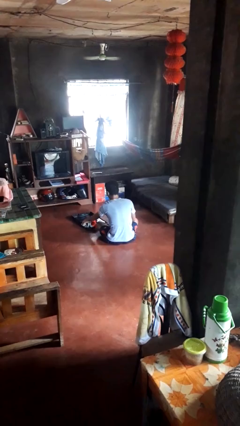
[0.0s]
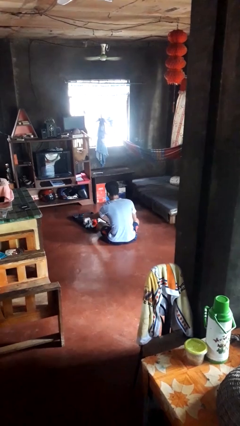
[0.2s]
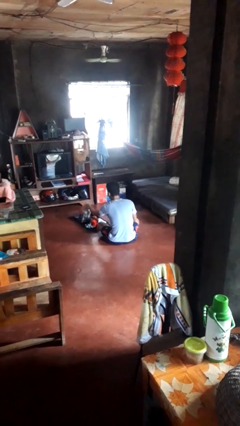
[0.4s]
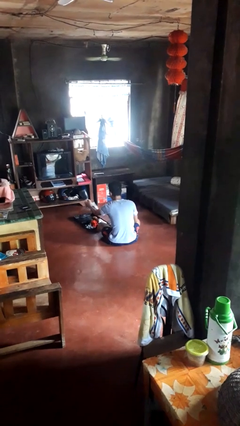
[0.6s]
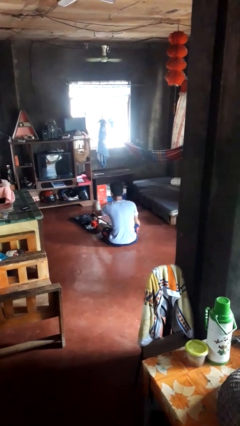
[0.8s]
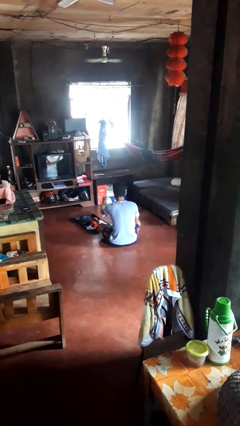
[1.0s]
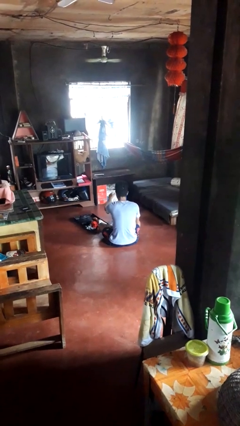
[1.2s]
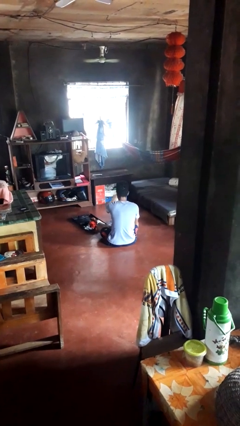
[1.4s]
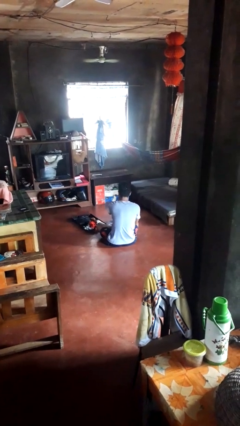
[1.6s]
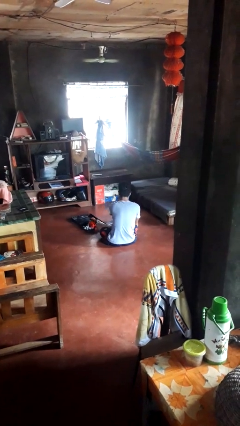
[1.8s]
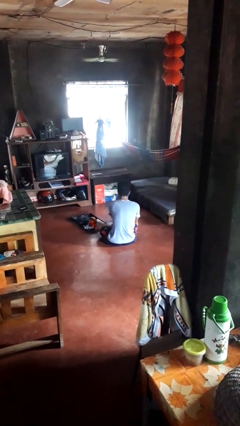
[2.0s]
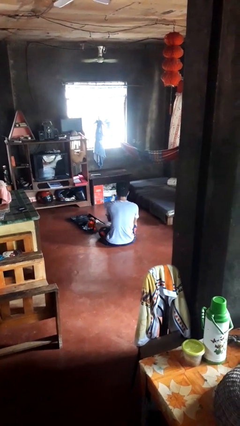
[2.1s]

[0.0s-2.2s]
person unloads clothes from suitcase

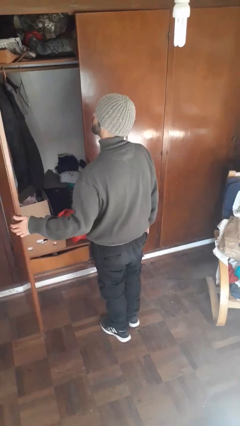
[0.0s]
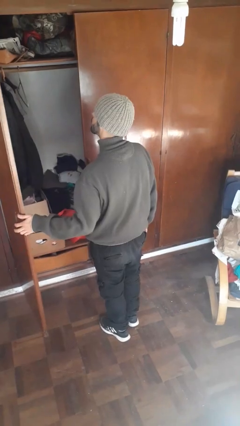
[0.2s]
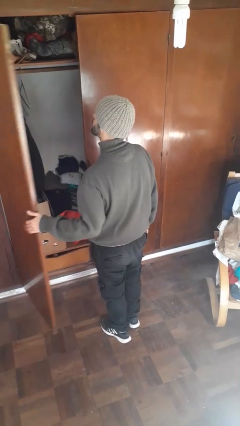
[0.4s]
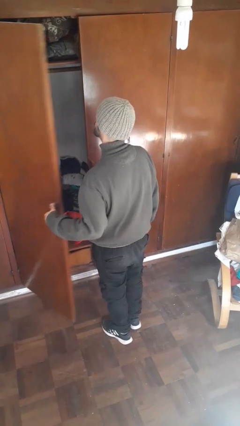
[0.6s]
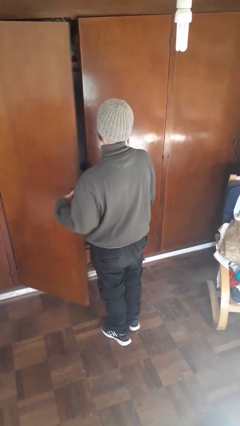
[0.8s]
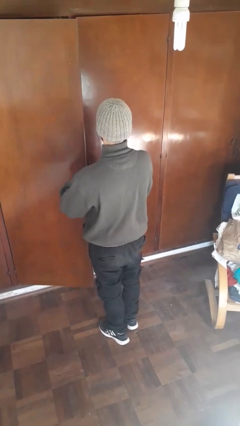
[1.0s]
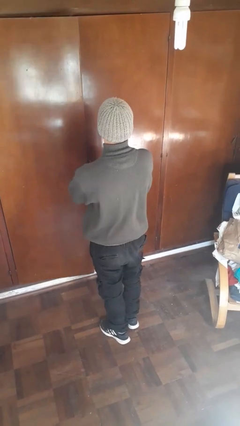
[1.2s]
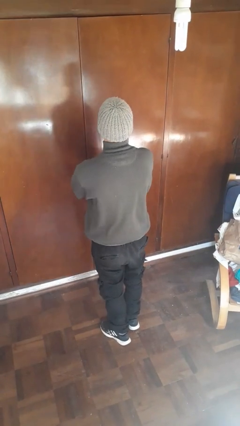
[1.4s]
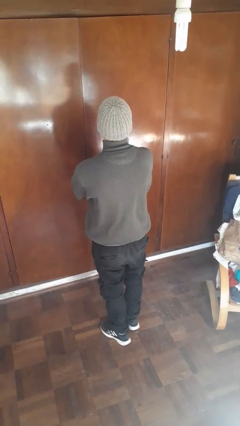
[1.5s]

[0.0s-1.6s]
person closes closet door

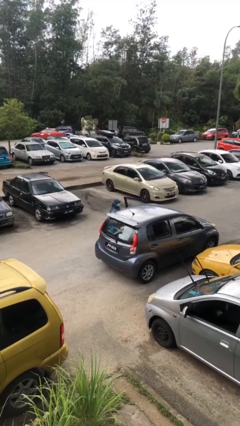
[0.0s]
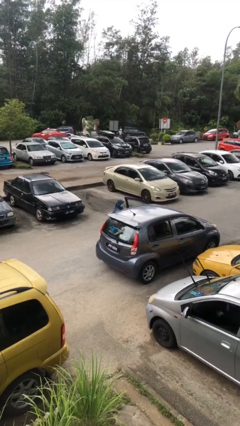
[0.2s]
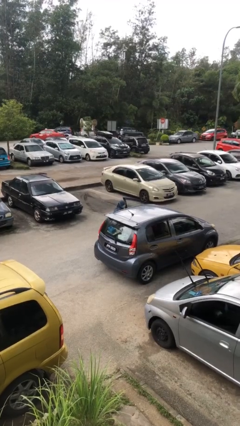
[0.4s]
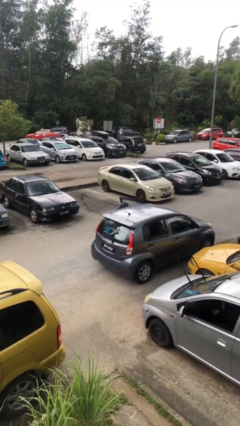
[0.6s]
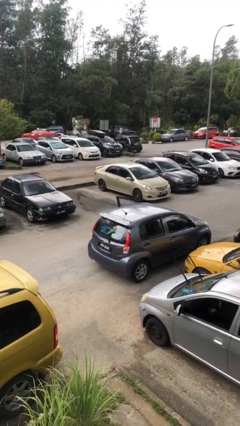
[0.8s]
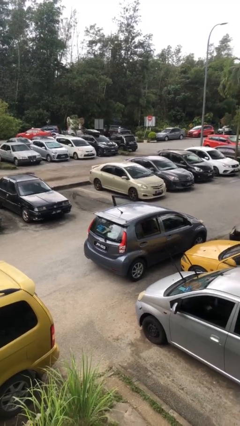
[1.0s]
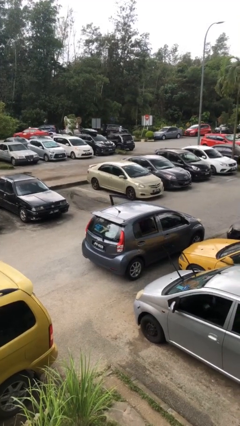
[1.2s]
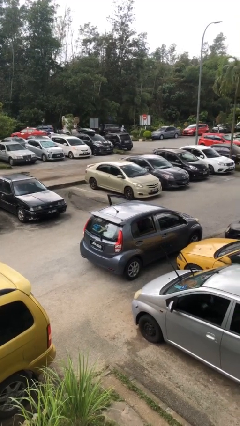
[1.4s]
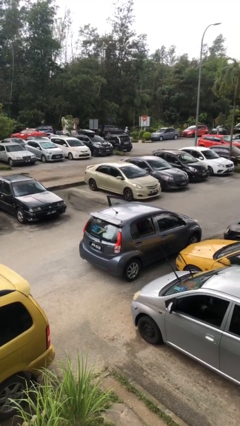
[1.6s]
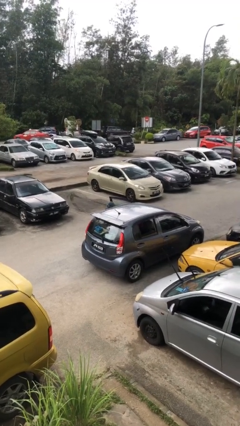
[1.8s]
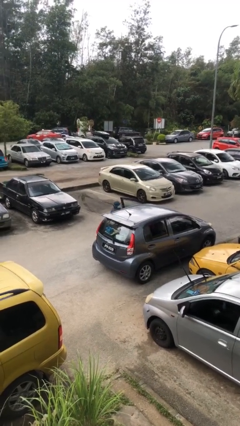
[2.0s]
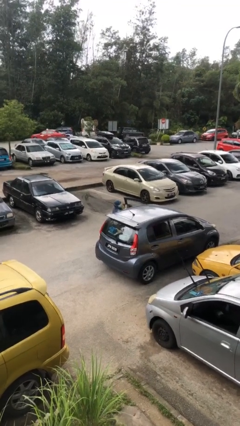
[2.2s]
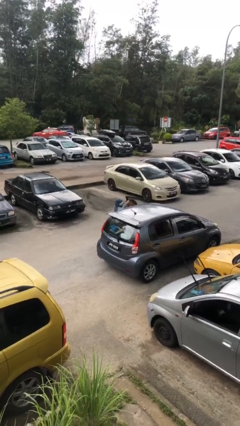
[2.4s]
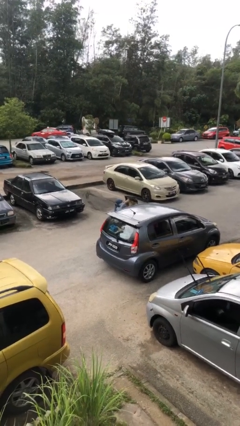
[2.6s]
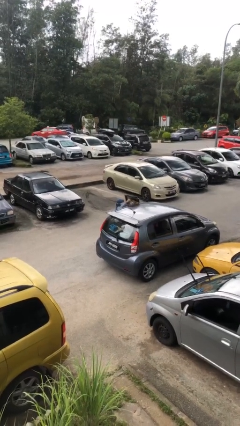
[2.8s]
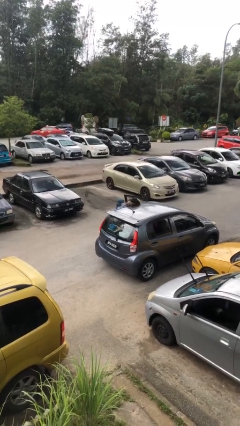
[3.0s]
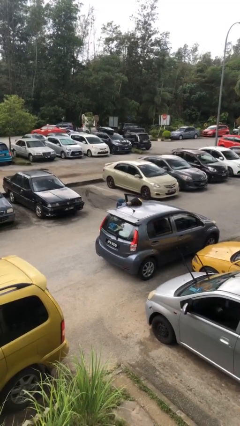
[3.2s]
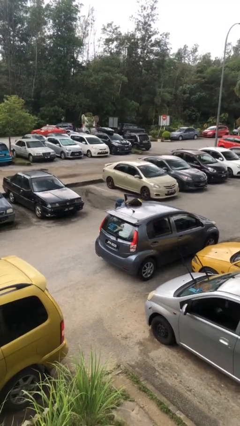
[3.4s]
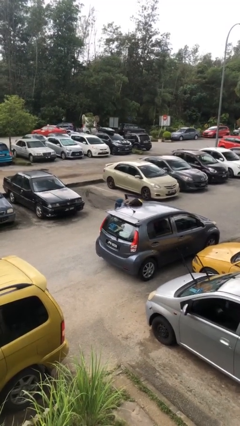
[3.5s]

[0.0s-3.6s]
person unloads car

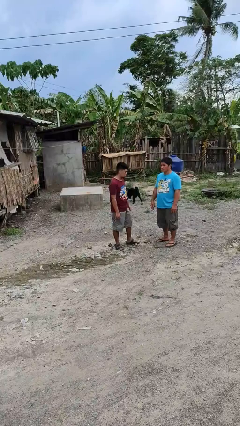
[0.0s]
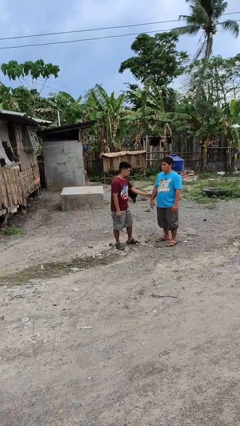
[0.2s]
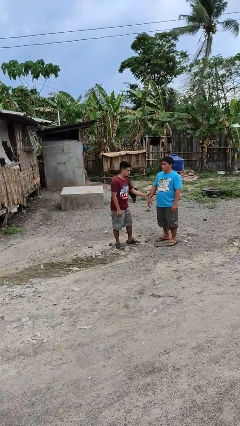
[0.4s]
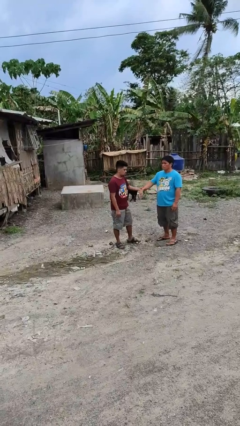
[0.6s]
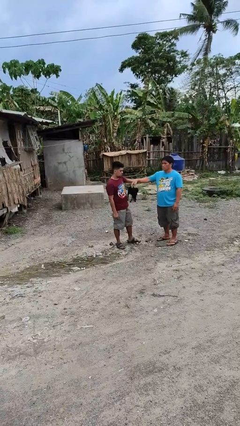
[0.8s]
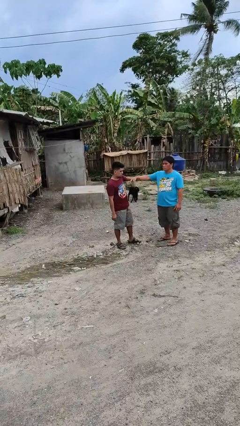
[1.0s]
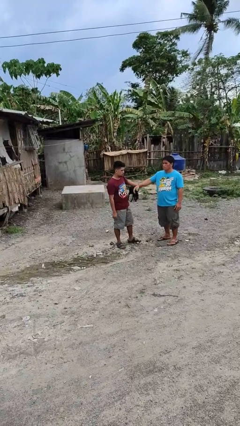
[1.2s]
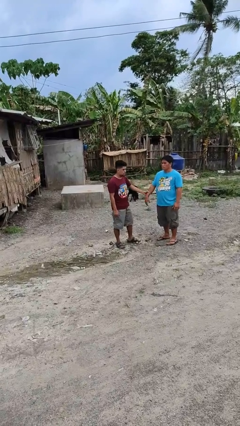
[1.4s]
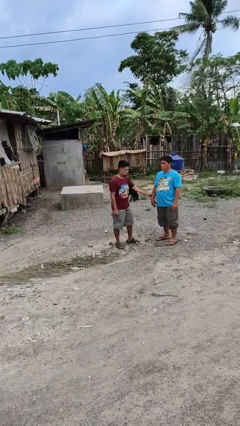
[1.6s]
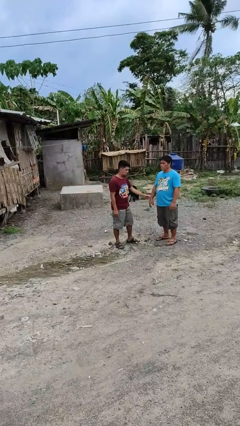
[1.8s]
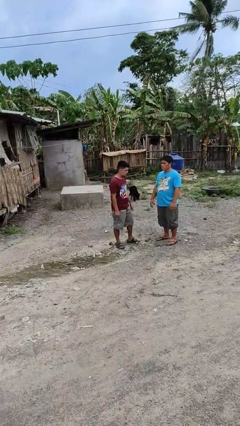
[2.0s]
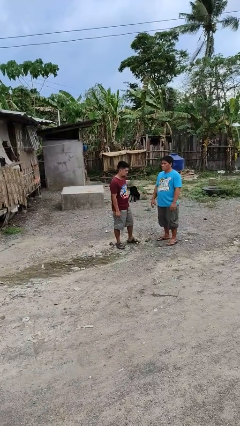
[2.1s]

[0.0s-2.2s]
person grabs person by forearm

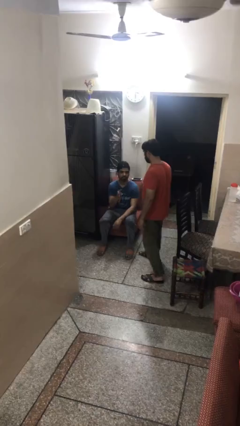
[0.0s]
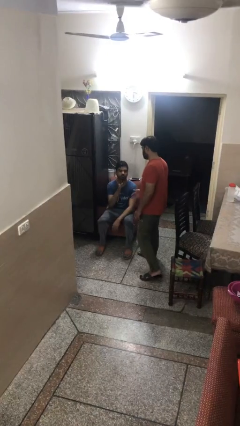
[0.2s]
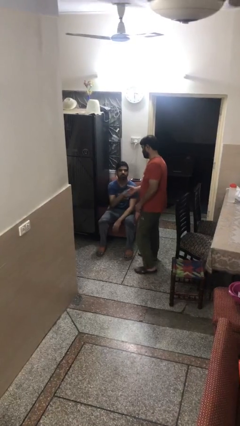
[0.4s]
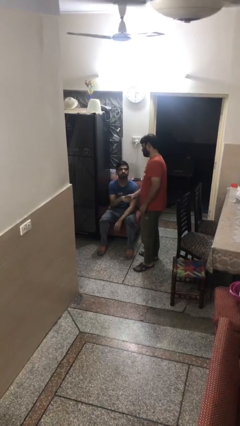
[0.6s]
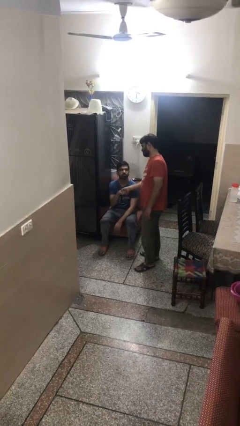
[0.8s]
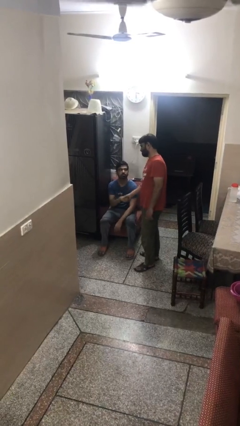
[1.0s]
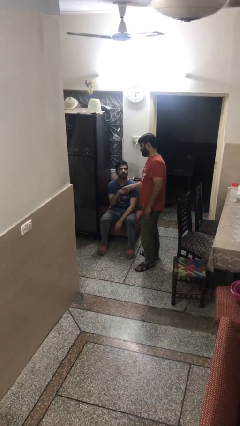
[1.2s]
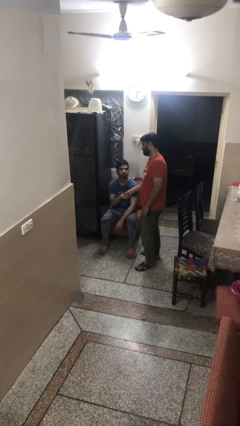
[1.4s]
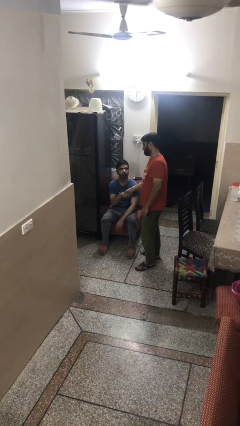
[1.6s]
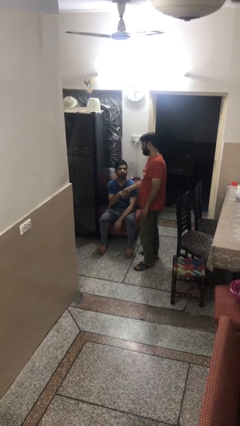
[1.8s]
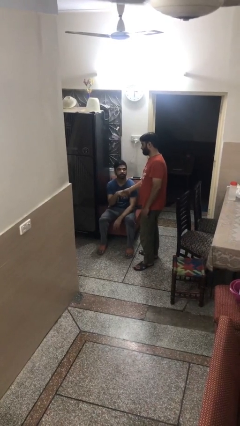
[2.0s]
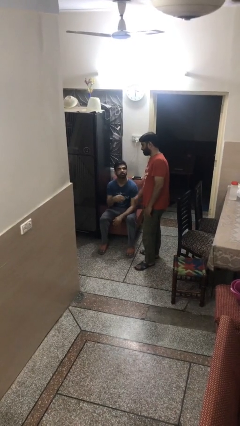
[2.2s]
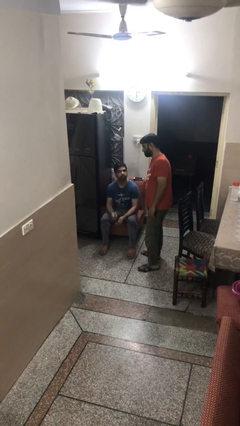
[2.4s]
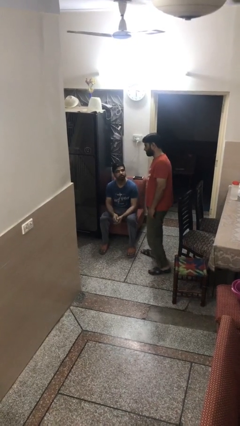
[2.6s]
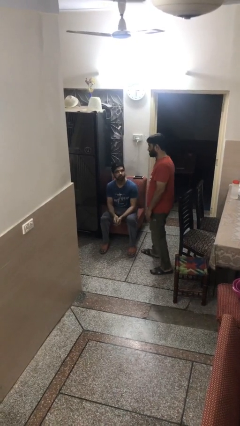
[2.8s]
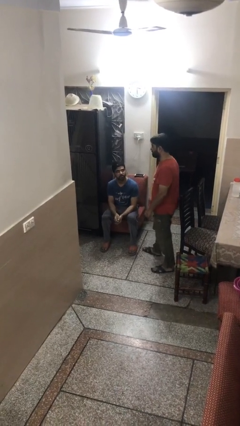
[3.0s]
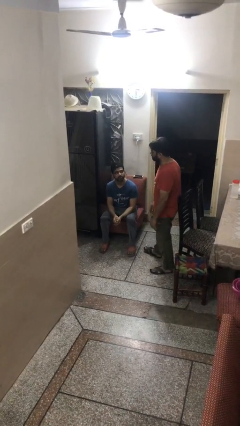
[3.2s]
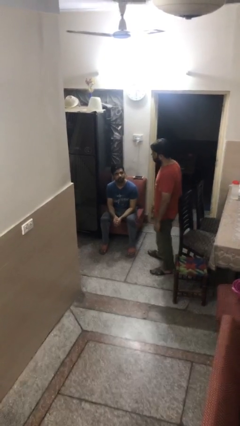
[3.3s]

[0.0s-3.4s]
person shakes hand

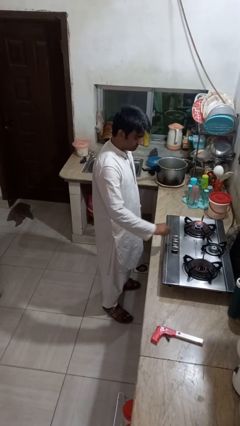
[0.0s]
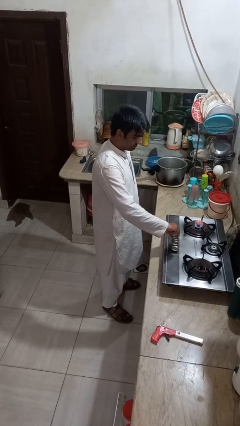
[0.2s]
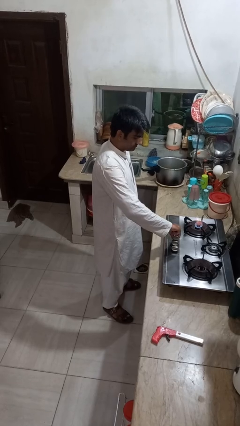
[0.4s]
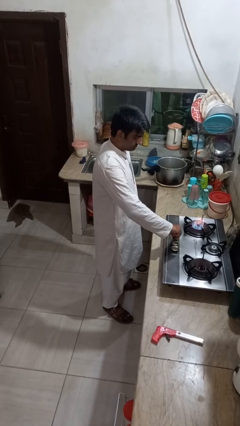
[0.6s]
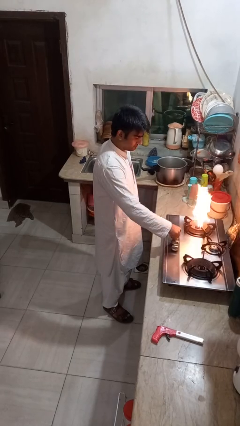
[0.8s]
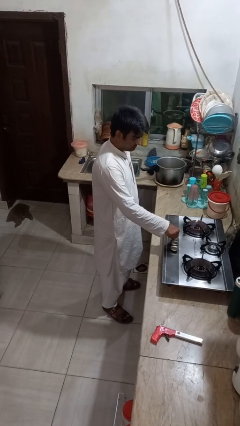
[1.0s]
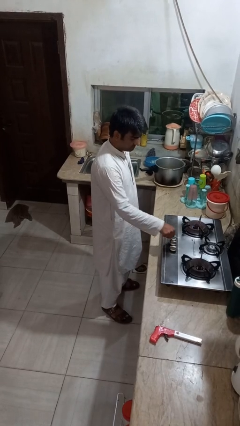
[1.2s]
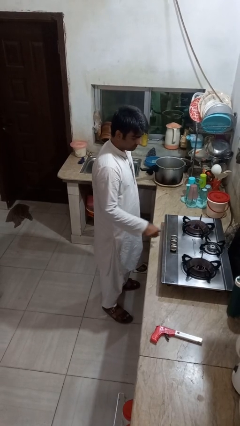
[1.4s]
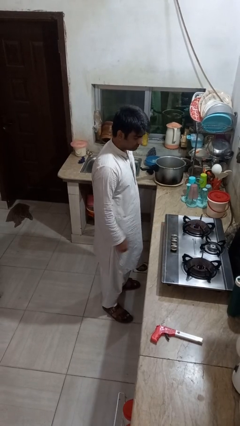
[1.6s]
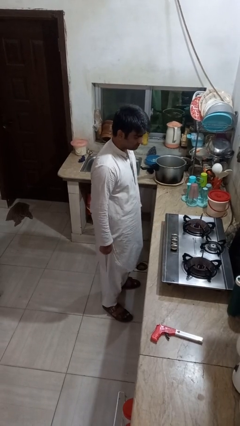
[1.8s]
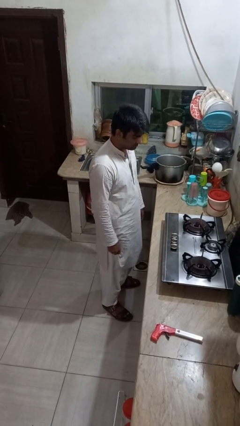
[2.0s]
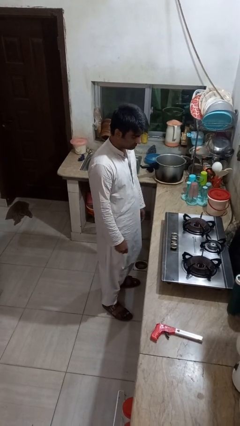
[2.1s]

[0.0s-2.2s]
person turns off stovetop

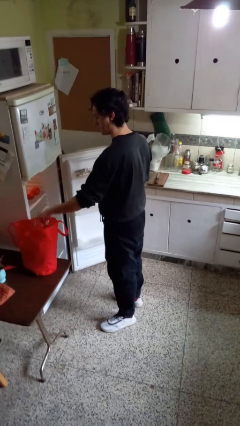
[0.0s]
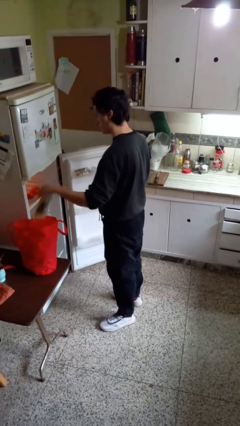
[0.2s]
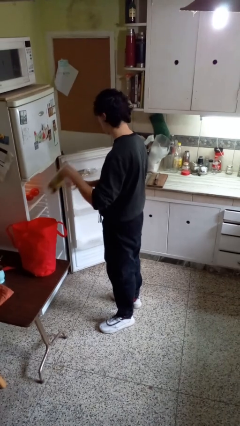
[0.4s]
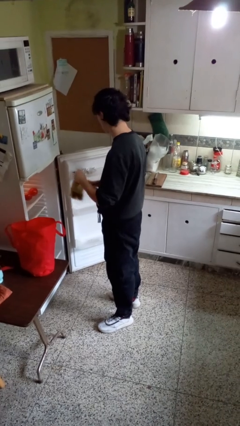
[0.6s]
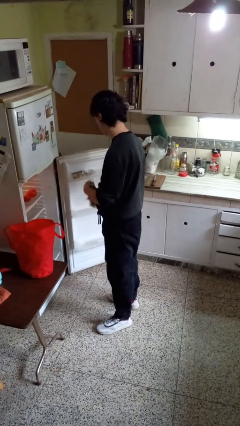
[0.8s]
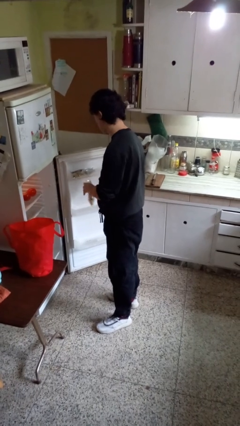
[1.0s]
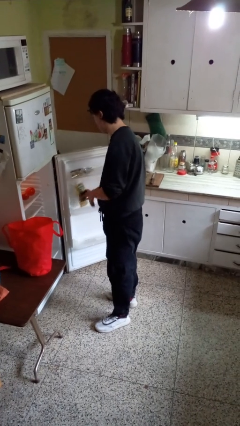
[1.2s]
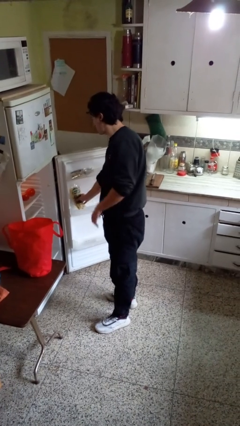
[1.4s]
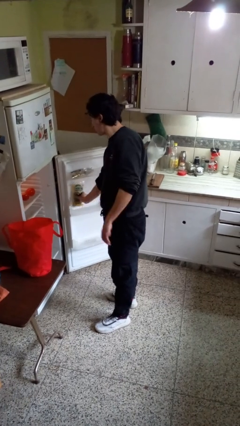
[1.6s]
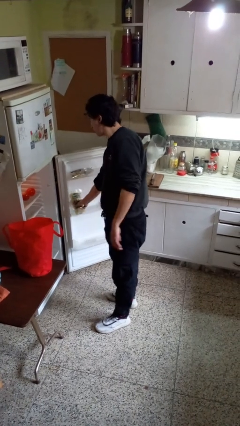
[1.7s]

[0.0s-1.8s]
person loads groceries into refrigerator

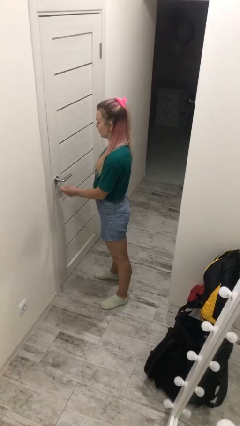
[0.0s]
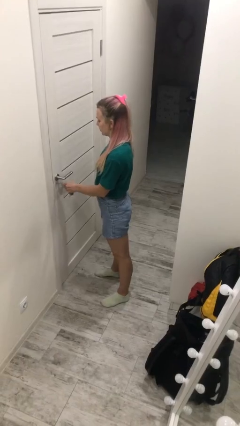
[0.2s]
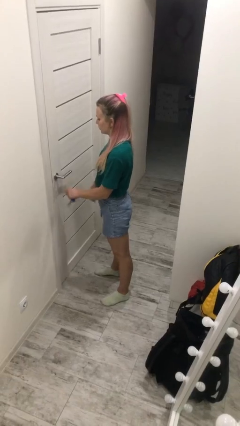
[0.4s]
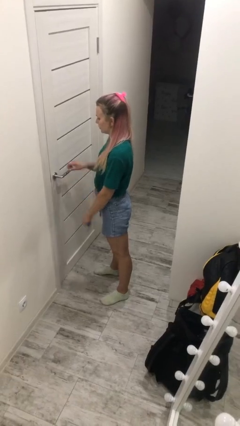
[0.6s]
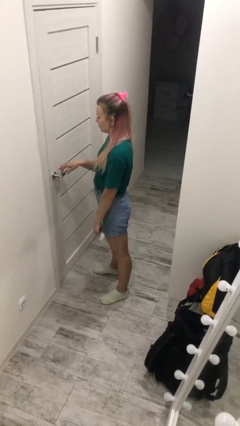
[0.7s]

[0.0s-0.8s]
person unlocks door with keys
